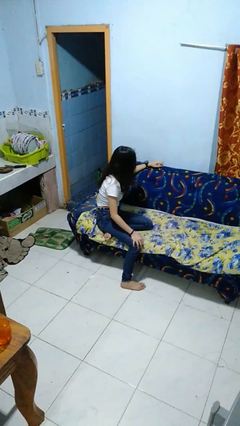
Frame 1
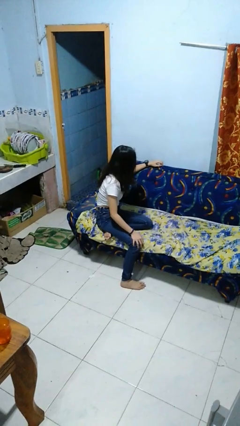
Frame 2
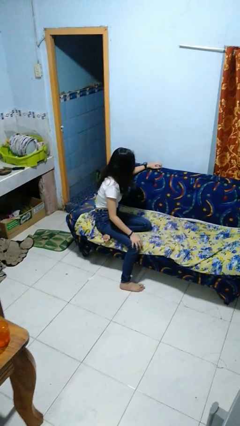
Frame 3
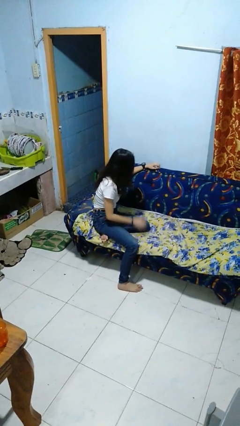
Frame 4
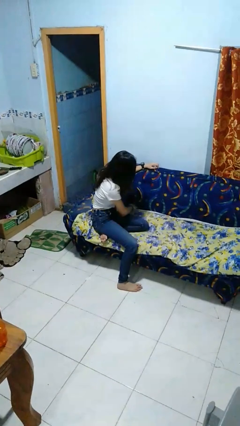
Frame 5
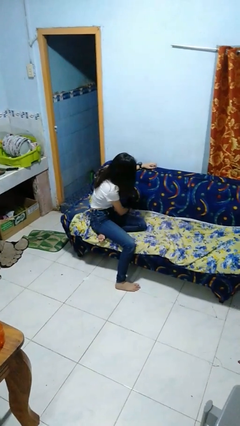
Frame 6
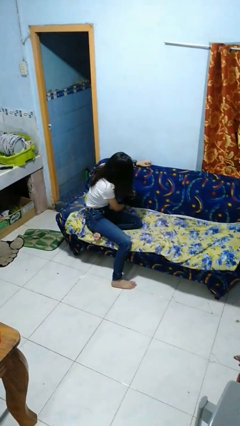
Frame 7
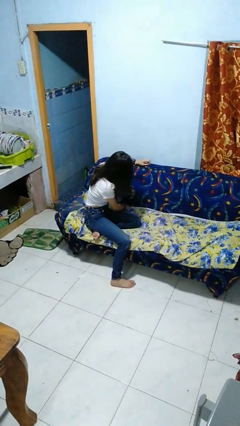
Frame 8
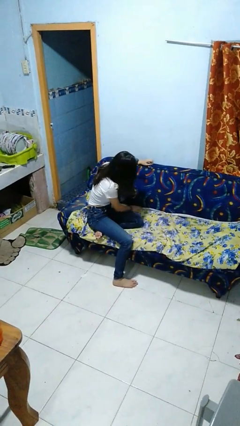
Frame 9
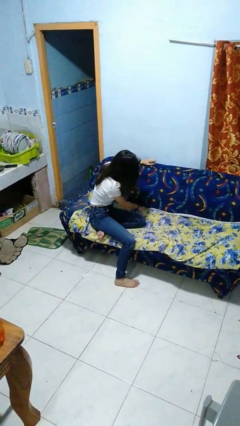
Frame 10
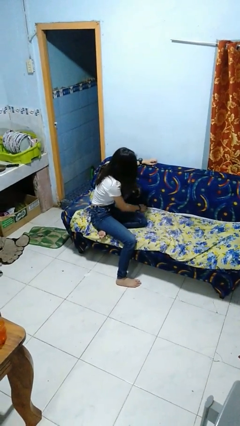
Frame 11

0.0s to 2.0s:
person searches in couch

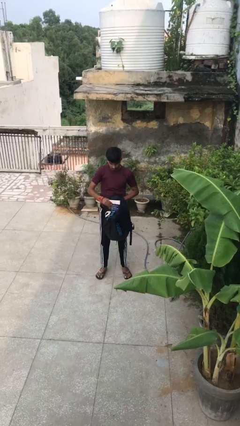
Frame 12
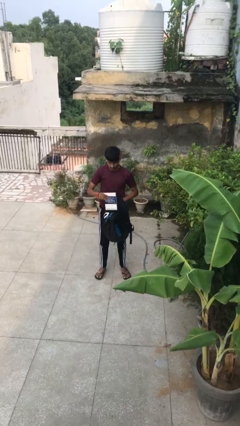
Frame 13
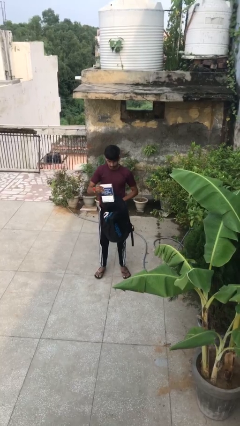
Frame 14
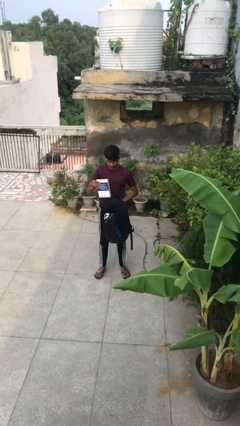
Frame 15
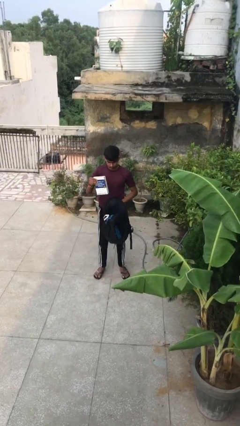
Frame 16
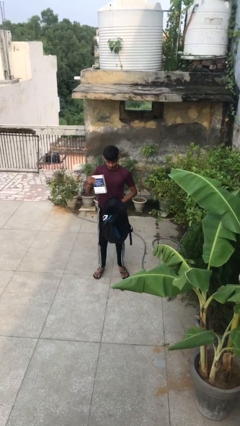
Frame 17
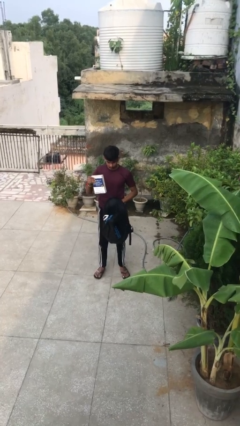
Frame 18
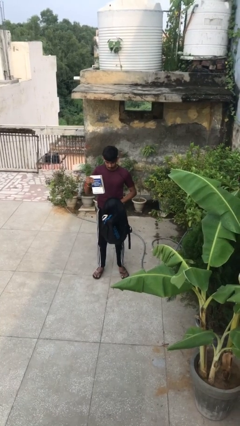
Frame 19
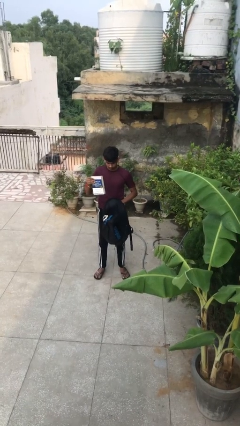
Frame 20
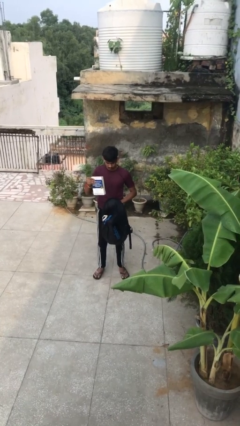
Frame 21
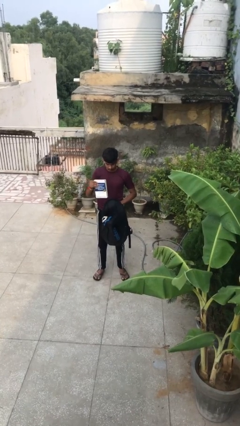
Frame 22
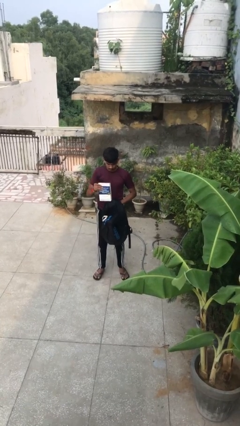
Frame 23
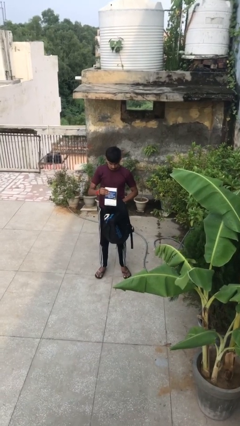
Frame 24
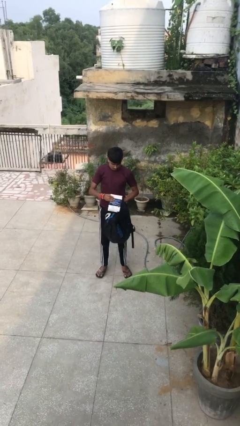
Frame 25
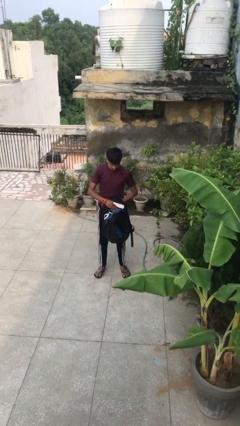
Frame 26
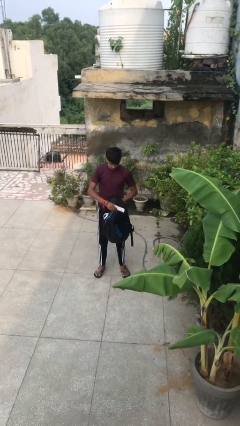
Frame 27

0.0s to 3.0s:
person takes object from backpack

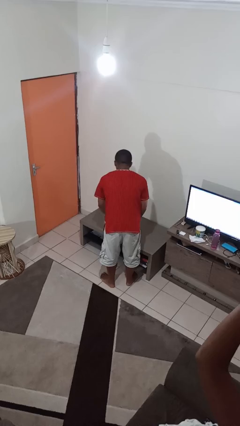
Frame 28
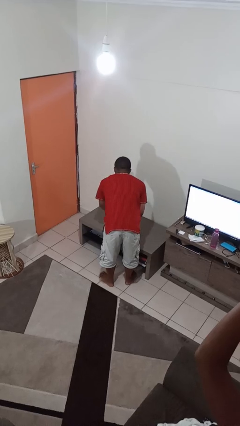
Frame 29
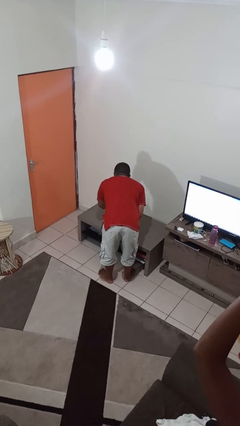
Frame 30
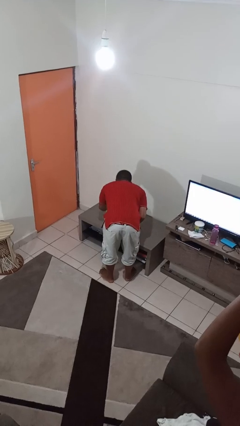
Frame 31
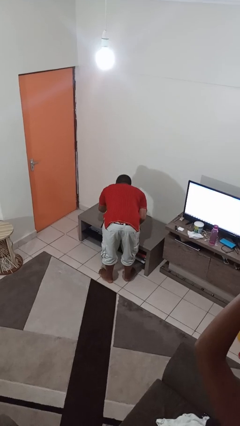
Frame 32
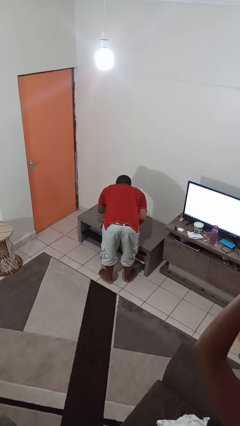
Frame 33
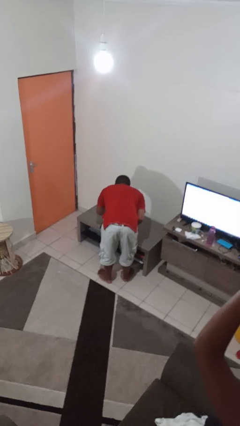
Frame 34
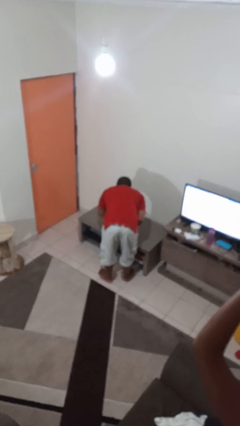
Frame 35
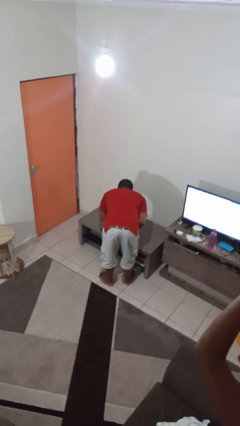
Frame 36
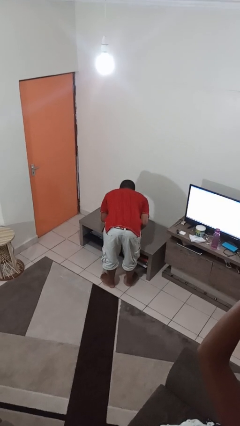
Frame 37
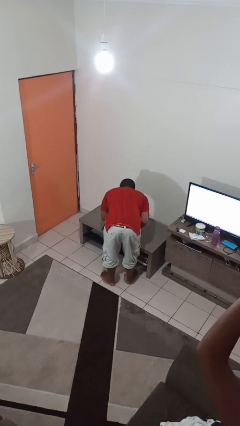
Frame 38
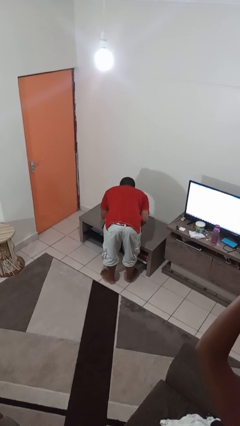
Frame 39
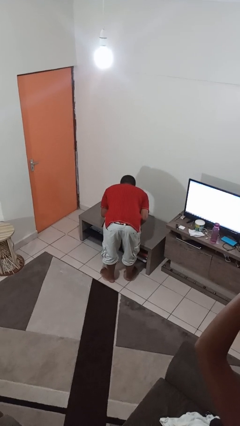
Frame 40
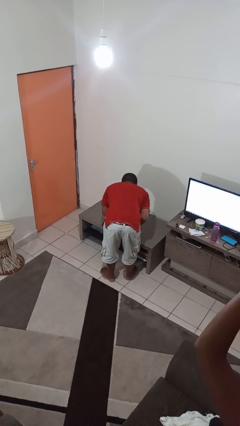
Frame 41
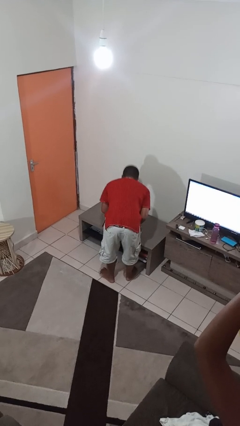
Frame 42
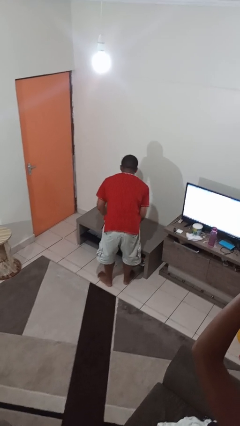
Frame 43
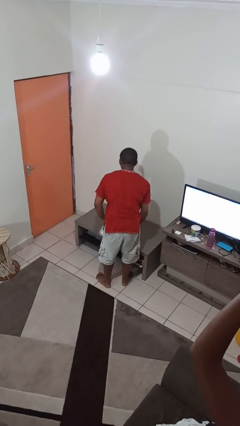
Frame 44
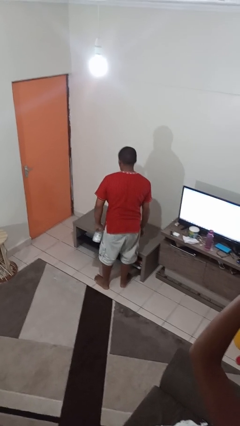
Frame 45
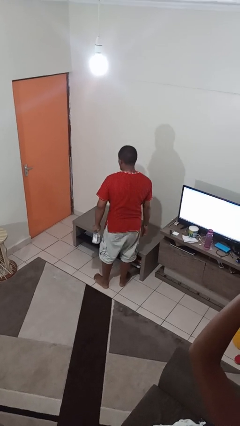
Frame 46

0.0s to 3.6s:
person sprays from bottle

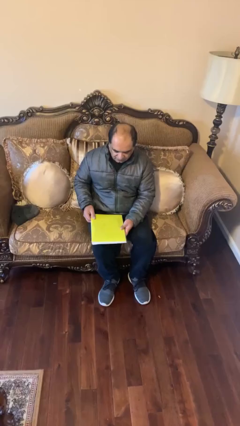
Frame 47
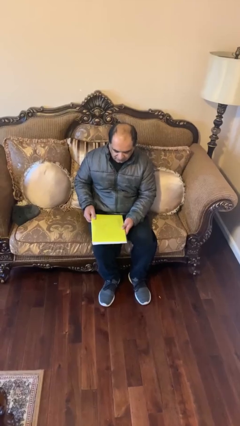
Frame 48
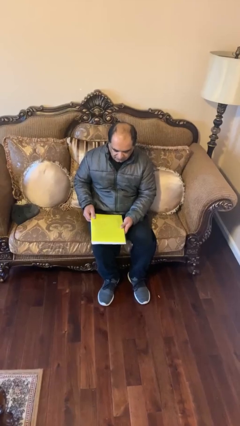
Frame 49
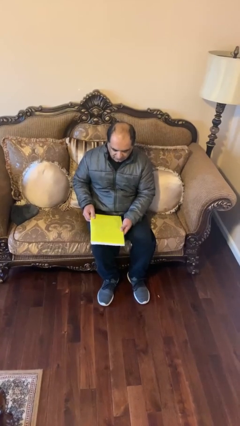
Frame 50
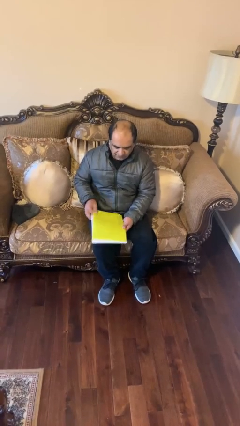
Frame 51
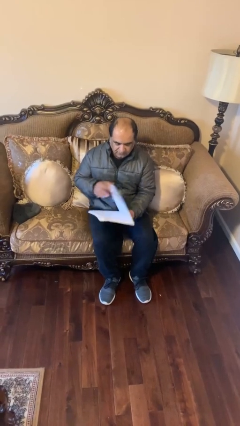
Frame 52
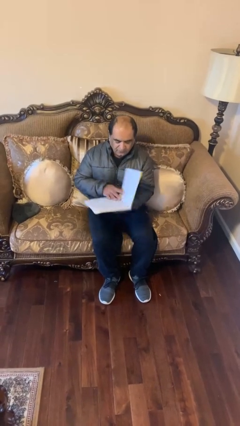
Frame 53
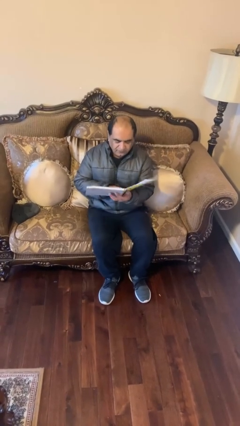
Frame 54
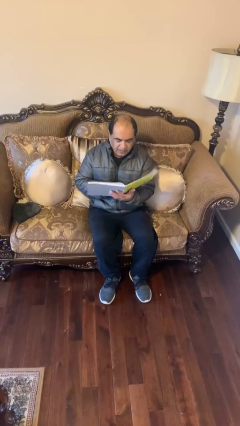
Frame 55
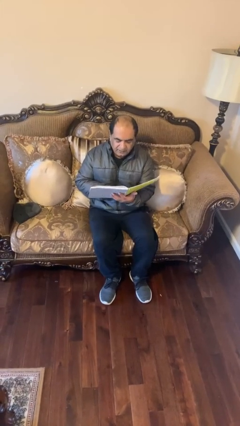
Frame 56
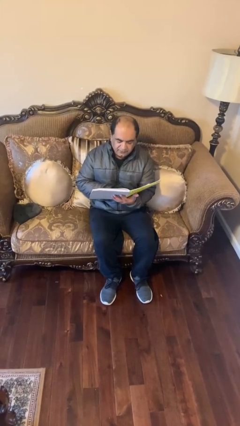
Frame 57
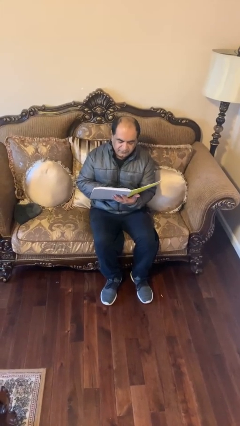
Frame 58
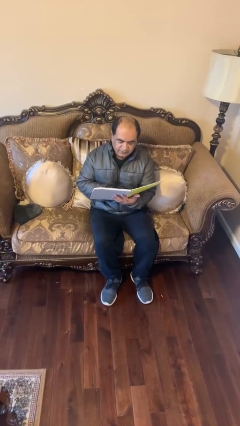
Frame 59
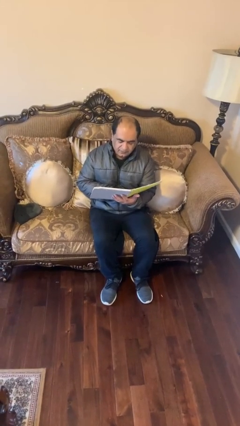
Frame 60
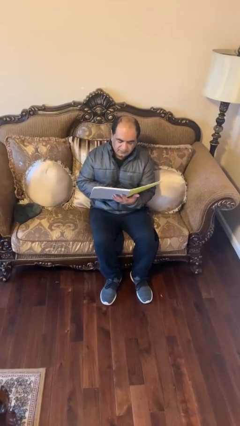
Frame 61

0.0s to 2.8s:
person reads document

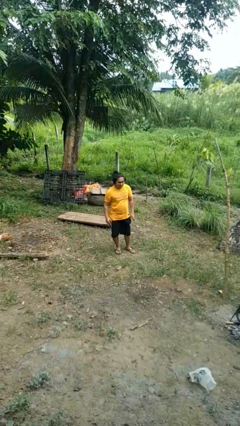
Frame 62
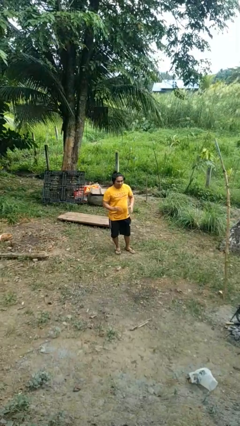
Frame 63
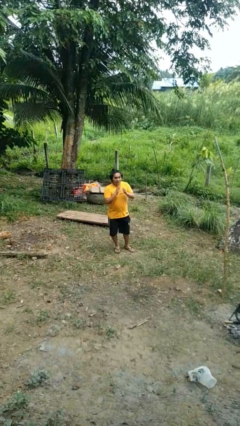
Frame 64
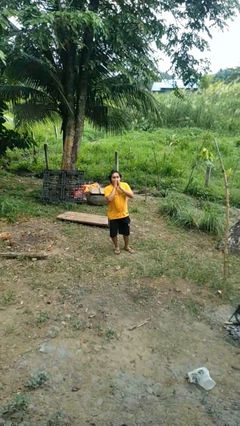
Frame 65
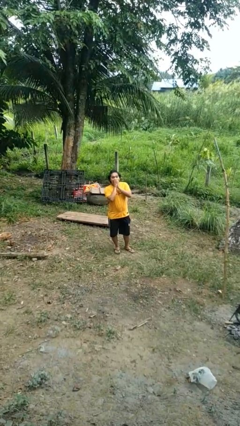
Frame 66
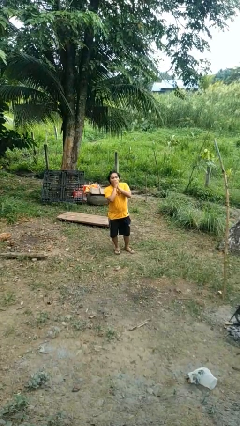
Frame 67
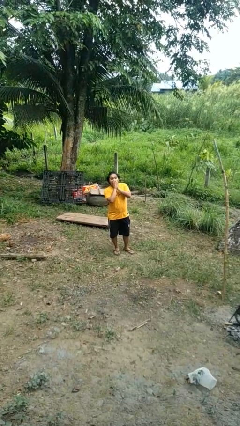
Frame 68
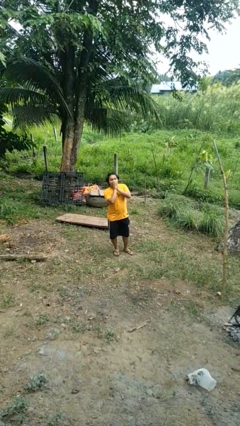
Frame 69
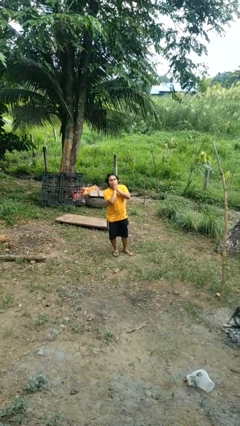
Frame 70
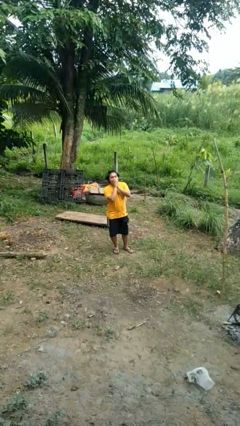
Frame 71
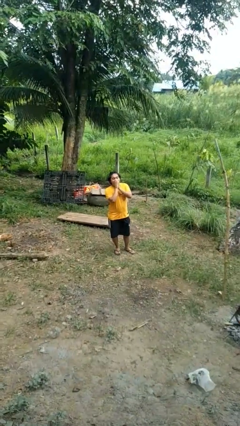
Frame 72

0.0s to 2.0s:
person covers face with hands

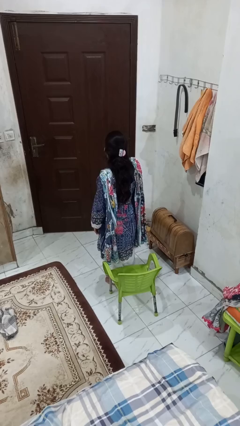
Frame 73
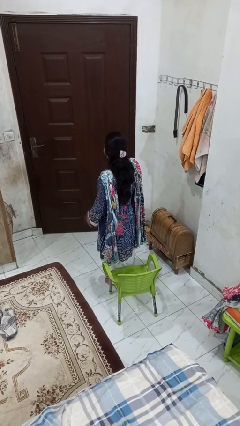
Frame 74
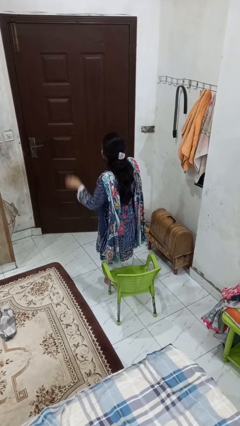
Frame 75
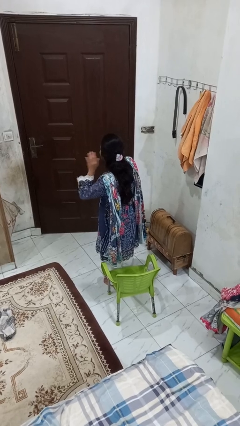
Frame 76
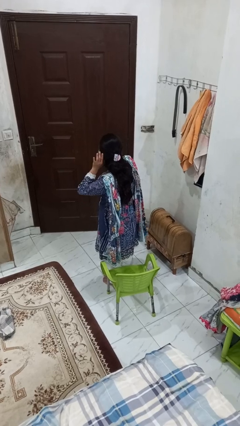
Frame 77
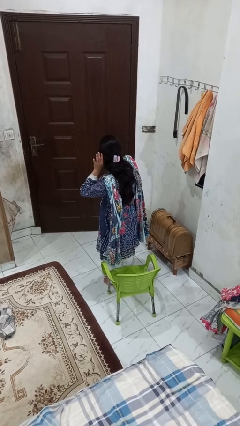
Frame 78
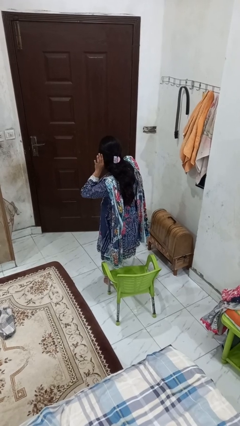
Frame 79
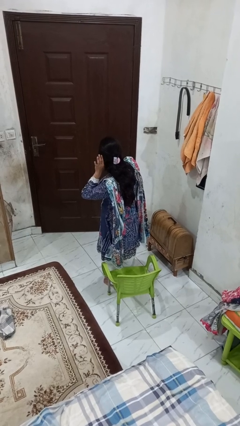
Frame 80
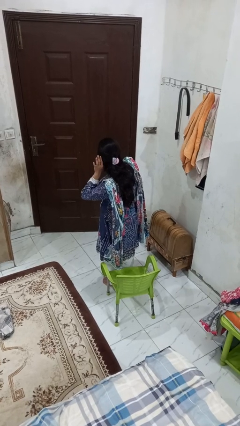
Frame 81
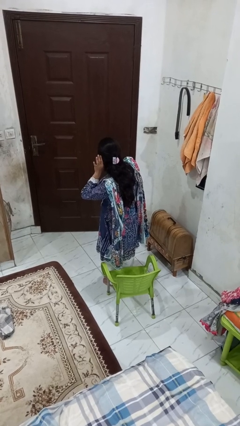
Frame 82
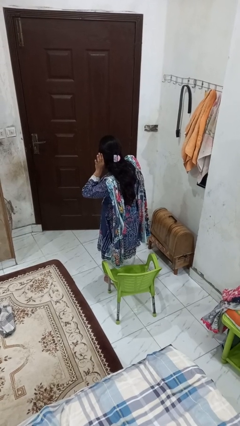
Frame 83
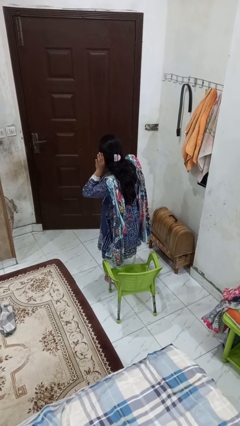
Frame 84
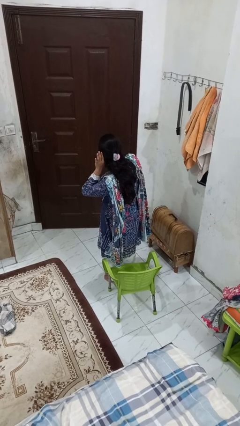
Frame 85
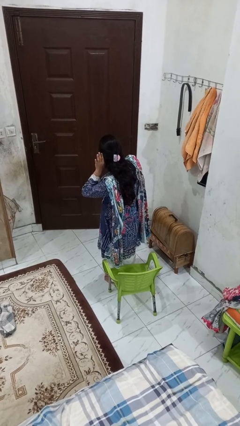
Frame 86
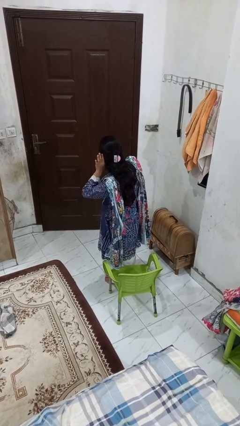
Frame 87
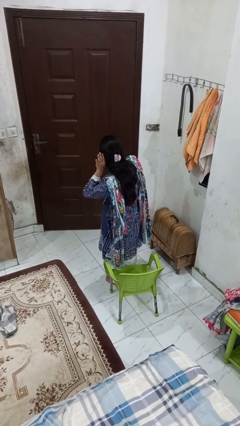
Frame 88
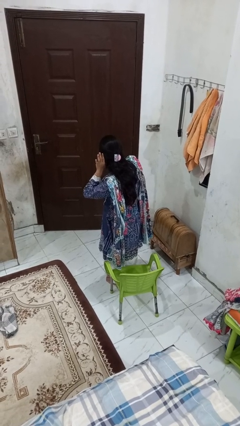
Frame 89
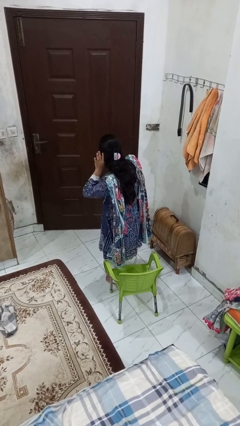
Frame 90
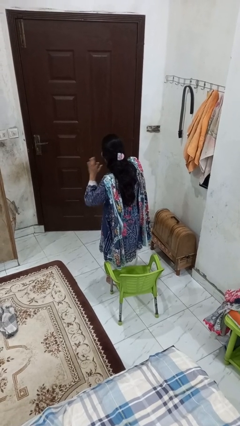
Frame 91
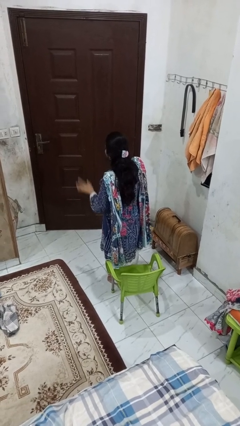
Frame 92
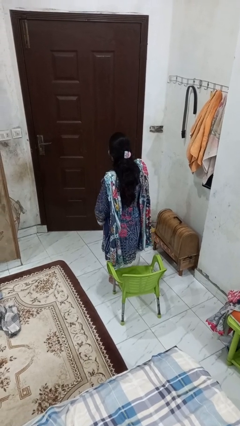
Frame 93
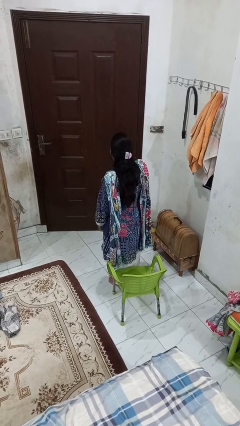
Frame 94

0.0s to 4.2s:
person gestures listen closely
